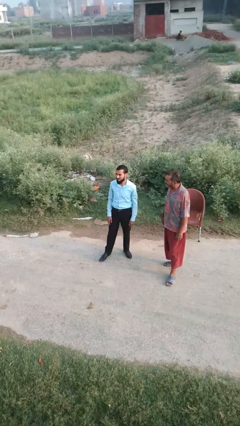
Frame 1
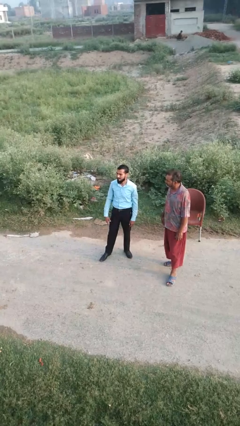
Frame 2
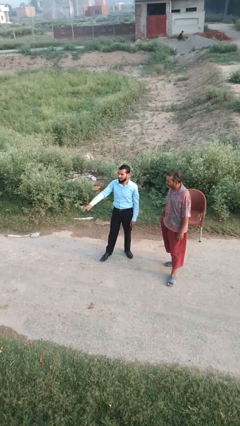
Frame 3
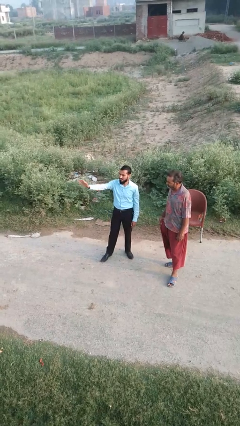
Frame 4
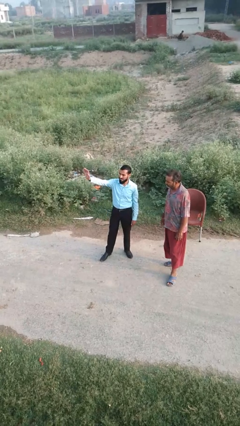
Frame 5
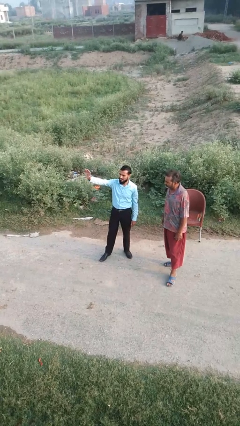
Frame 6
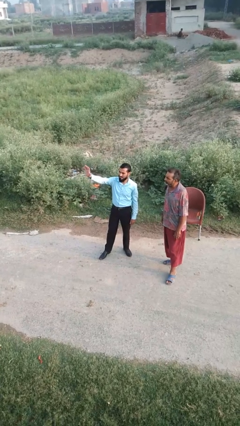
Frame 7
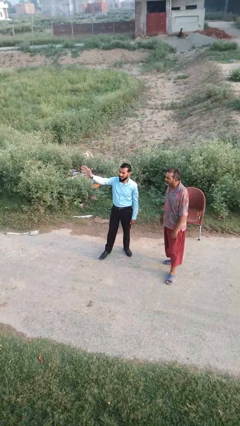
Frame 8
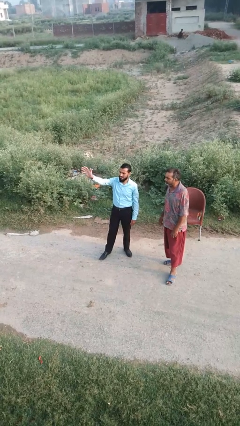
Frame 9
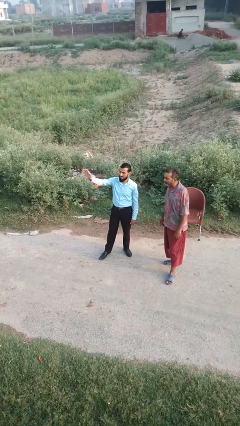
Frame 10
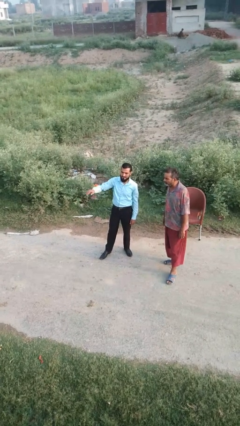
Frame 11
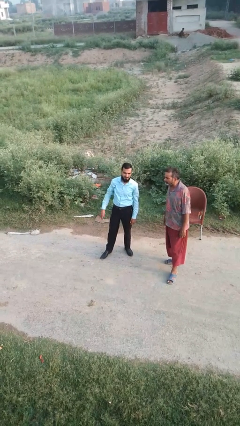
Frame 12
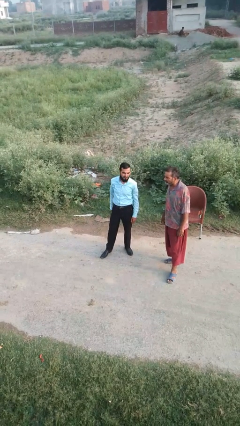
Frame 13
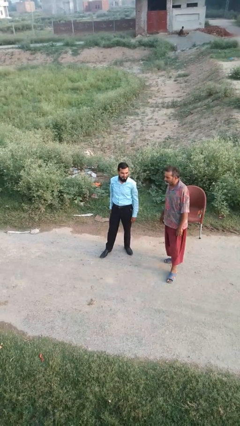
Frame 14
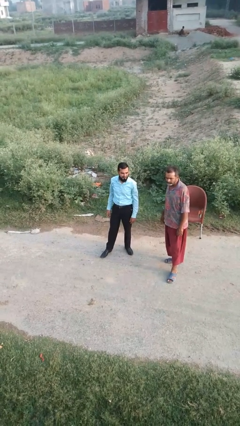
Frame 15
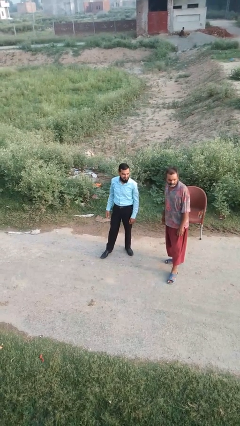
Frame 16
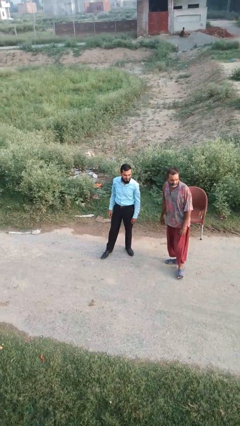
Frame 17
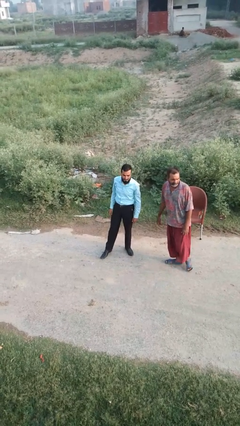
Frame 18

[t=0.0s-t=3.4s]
person waves at person

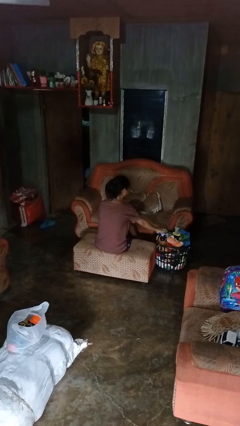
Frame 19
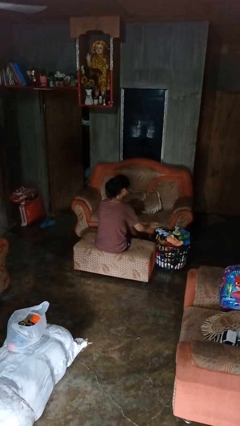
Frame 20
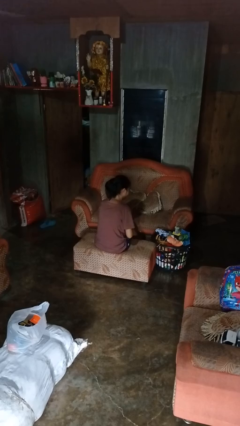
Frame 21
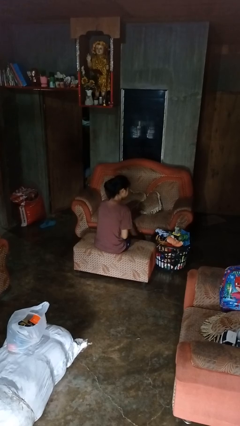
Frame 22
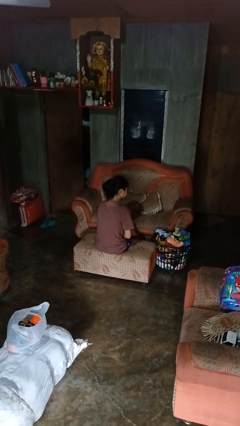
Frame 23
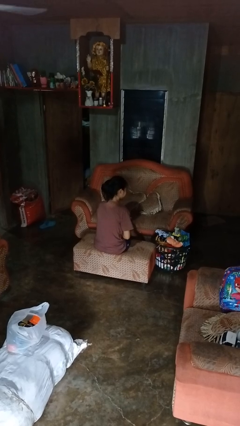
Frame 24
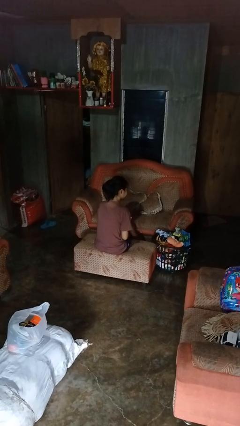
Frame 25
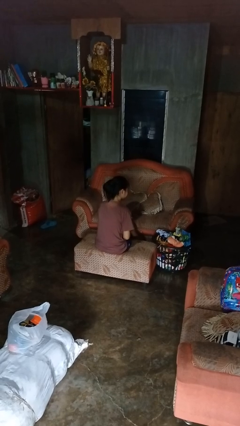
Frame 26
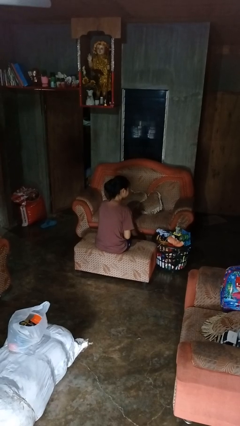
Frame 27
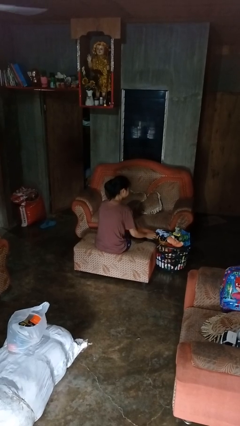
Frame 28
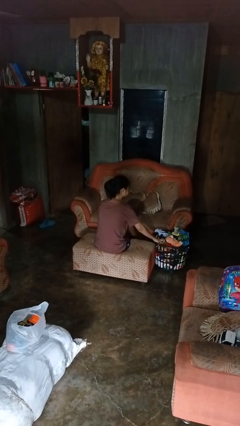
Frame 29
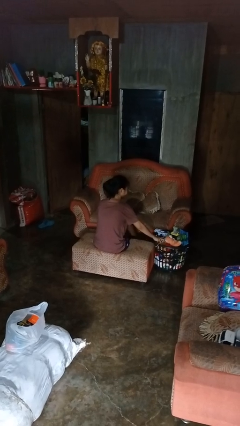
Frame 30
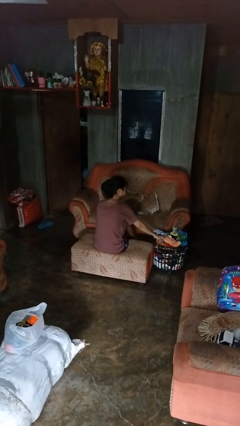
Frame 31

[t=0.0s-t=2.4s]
person puts object into basket

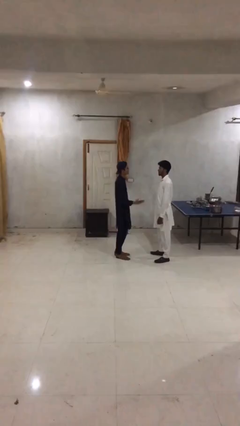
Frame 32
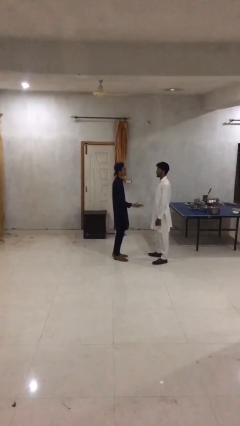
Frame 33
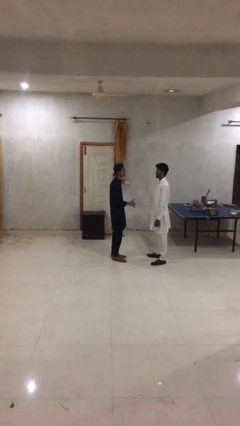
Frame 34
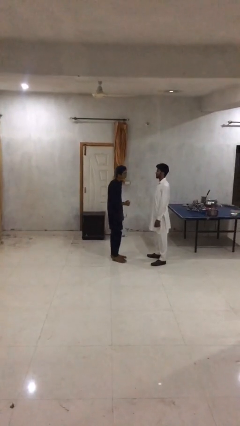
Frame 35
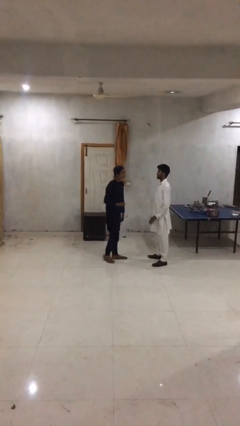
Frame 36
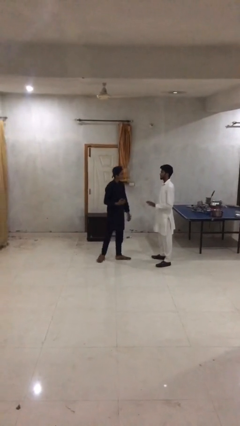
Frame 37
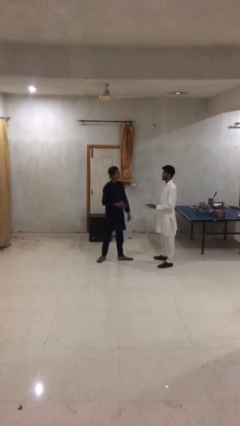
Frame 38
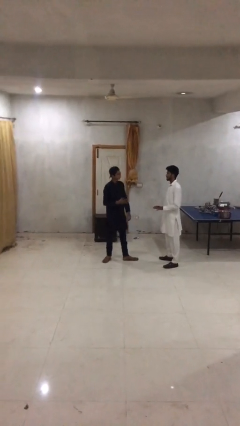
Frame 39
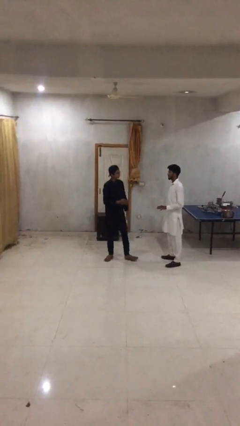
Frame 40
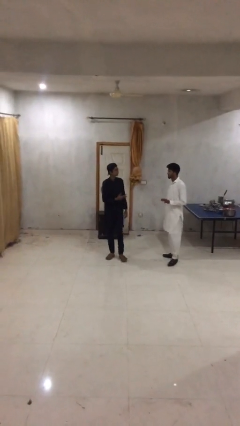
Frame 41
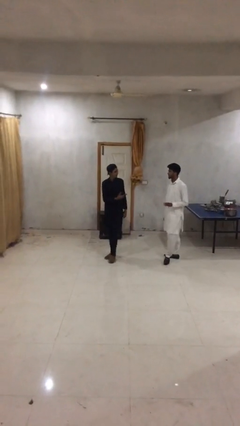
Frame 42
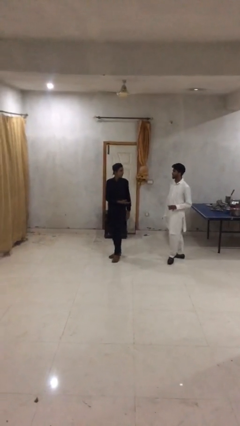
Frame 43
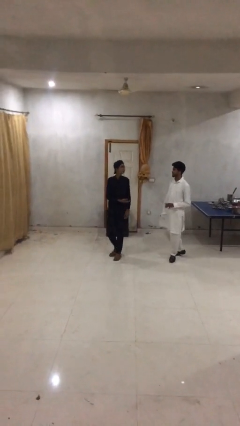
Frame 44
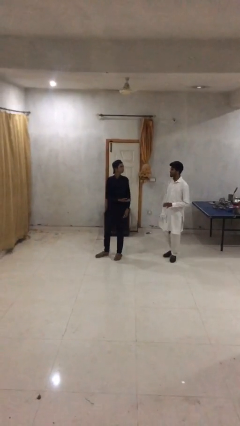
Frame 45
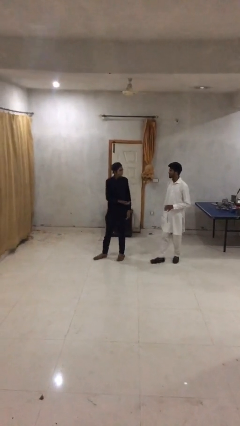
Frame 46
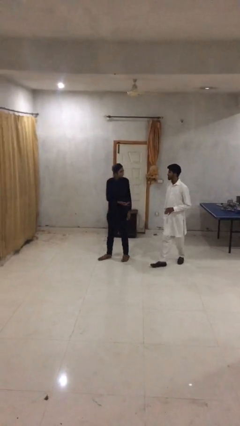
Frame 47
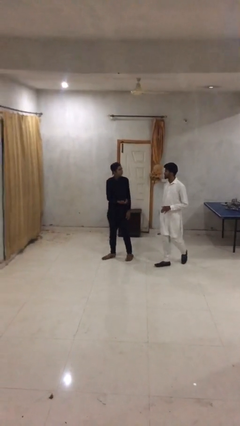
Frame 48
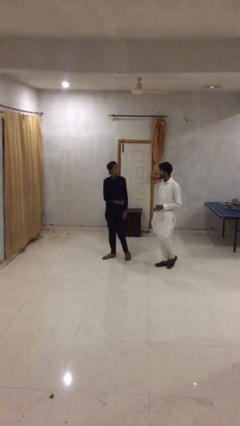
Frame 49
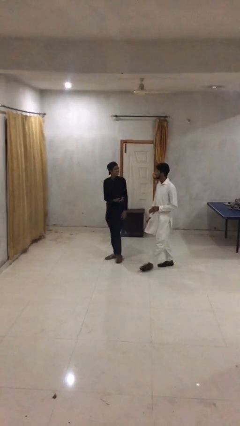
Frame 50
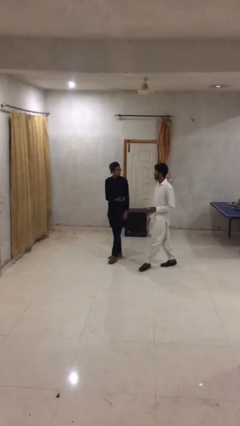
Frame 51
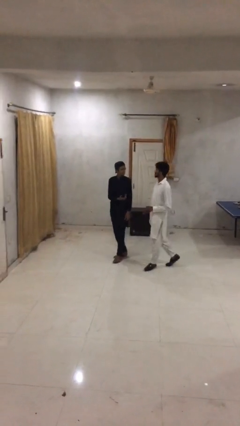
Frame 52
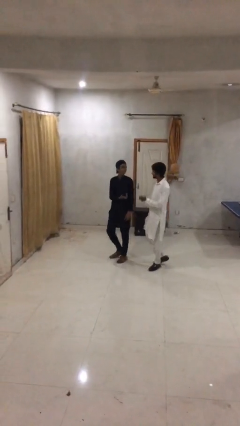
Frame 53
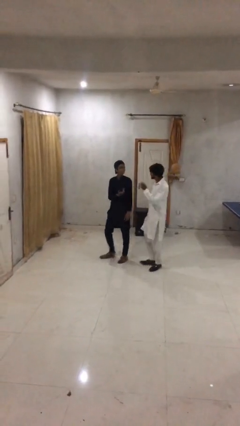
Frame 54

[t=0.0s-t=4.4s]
person talks to person

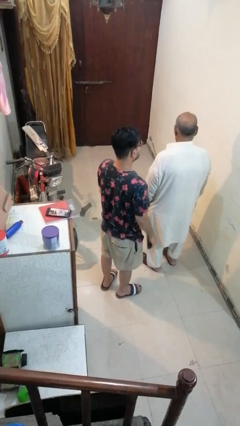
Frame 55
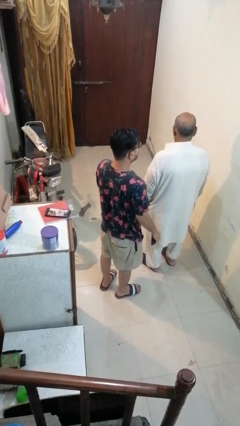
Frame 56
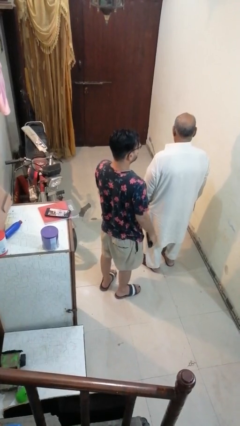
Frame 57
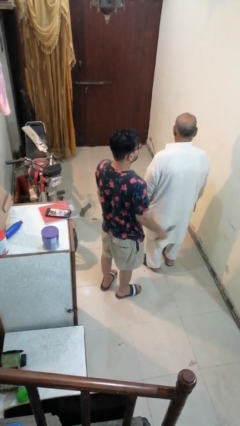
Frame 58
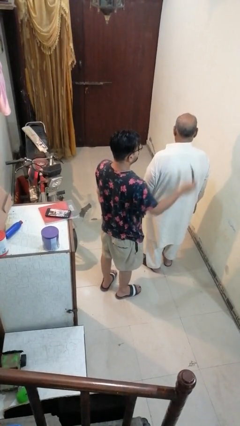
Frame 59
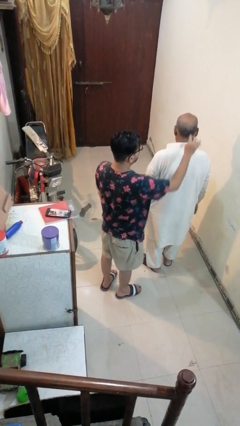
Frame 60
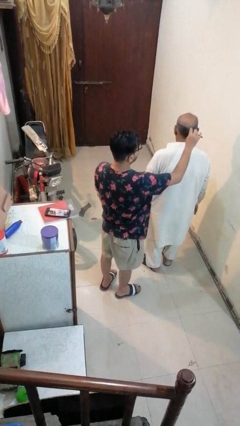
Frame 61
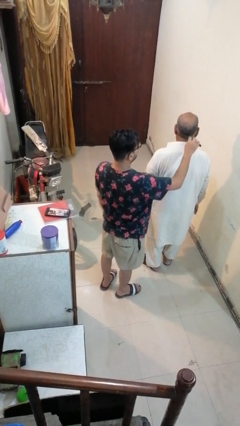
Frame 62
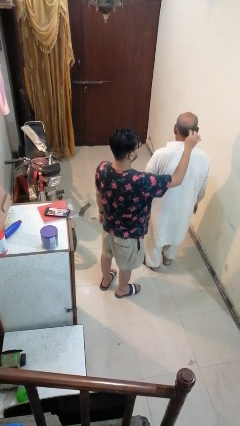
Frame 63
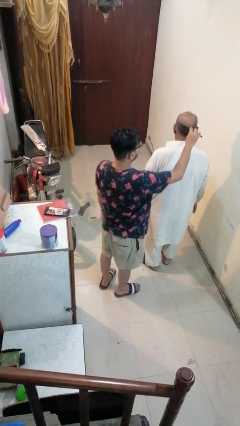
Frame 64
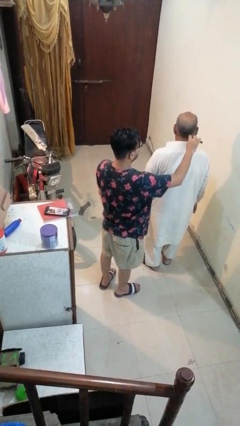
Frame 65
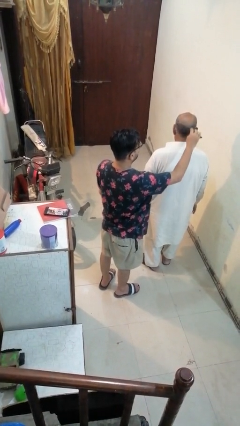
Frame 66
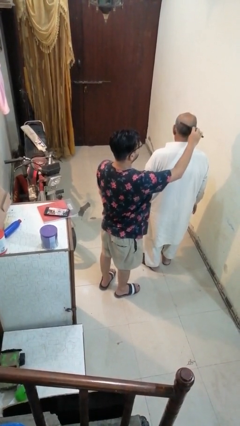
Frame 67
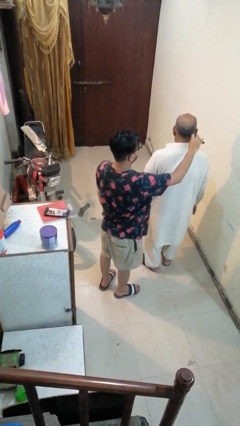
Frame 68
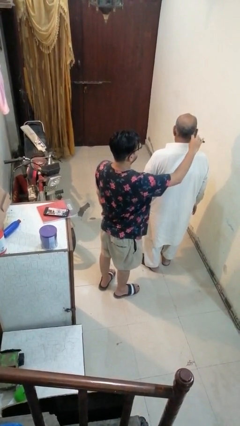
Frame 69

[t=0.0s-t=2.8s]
person brushes hair of person

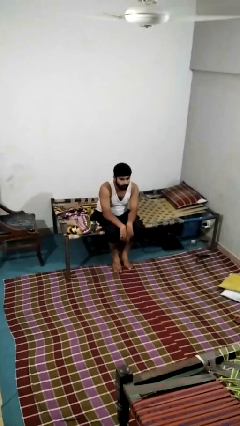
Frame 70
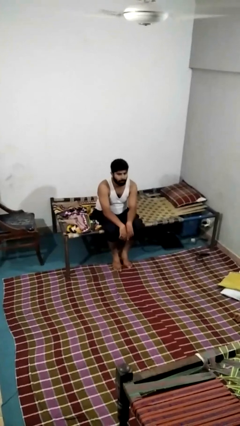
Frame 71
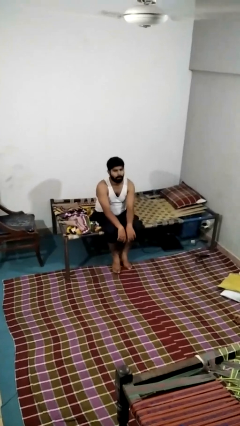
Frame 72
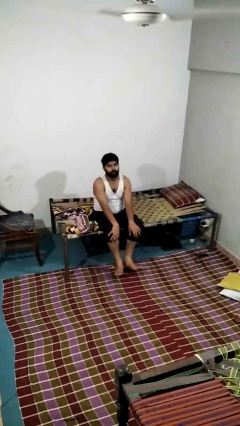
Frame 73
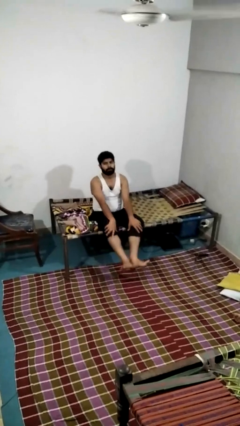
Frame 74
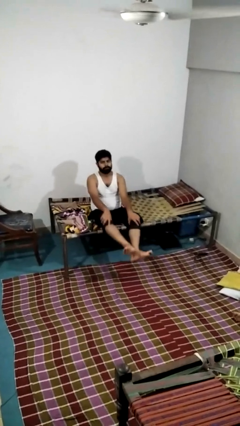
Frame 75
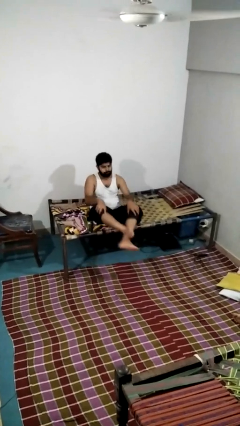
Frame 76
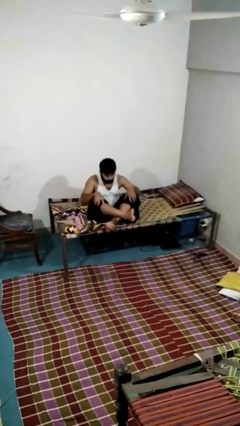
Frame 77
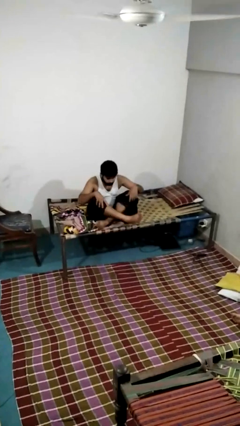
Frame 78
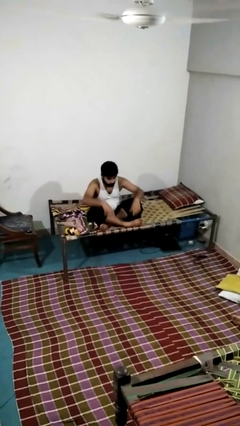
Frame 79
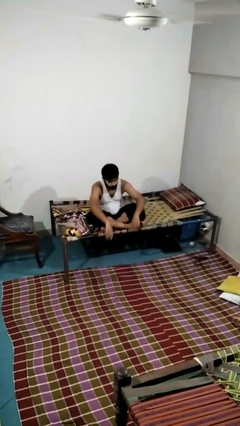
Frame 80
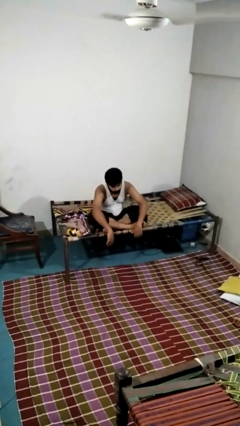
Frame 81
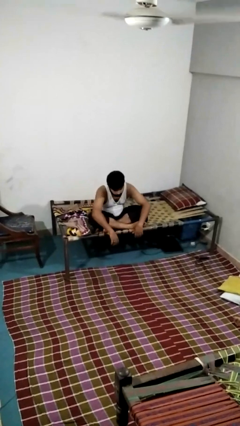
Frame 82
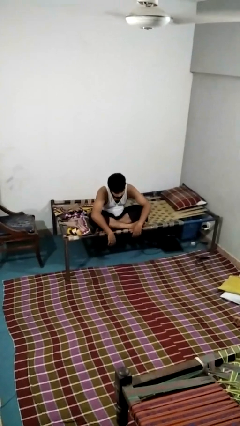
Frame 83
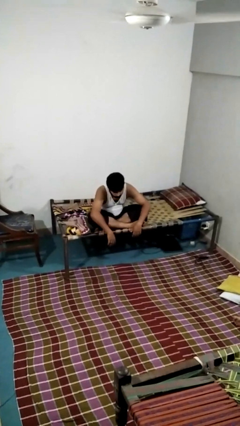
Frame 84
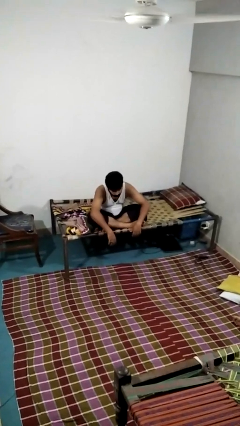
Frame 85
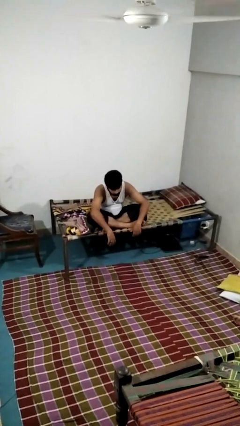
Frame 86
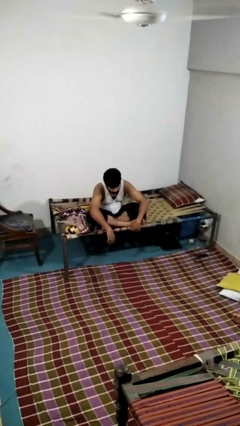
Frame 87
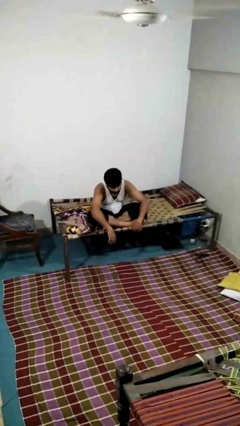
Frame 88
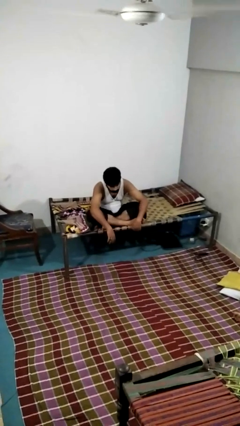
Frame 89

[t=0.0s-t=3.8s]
person crosses legs

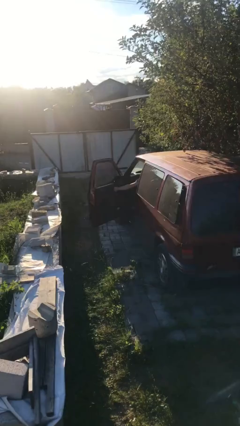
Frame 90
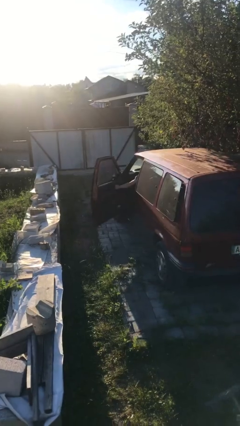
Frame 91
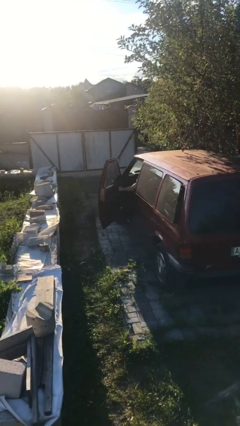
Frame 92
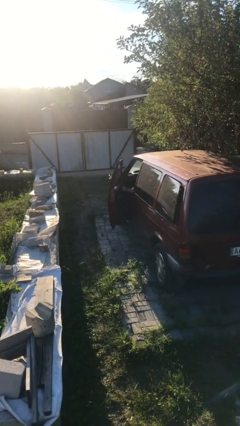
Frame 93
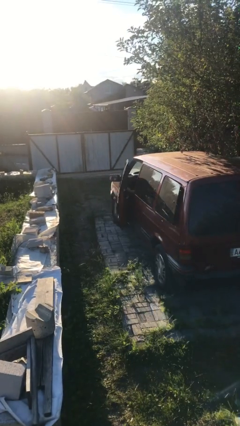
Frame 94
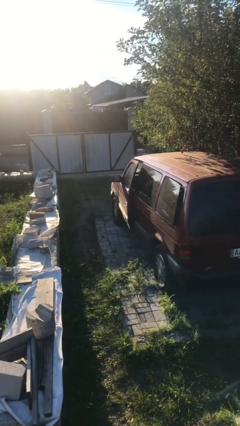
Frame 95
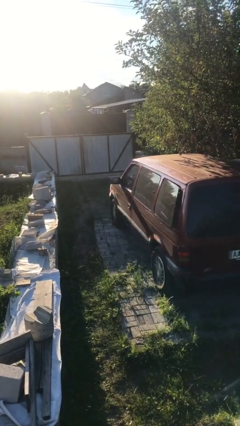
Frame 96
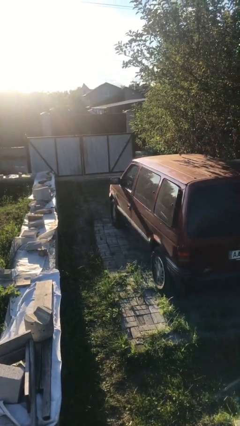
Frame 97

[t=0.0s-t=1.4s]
person closes car door
